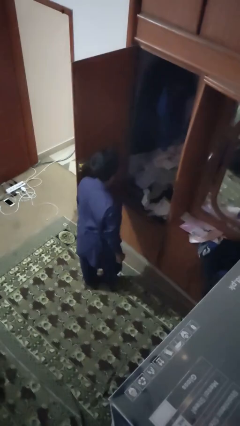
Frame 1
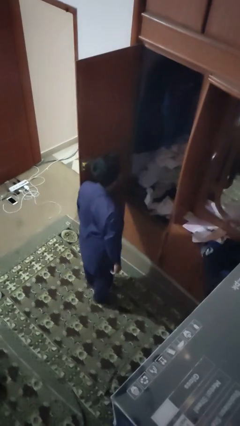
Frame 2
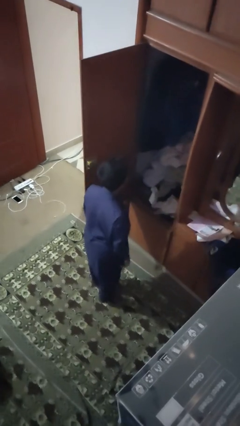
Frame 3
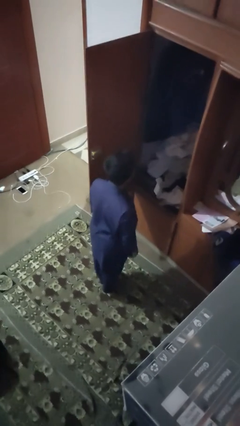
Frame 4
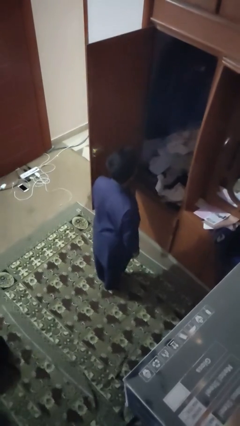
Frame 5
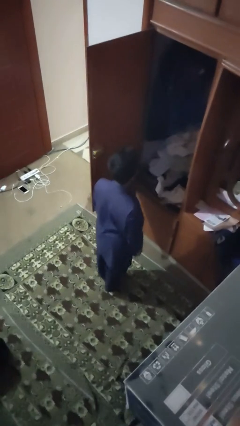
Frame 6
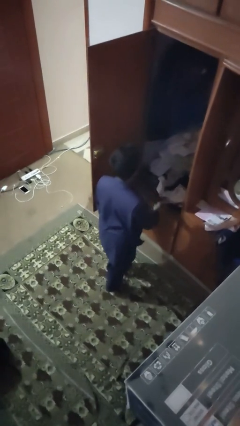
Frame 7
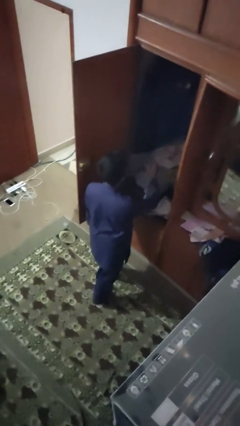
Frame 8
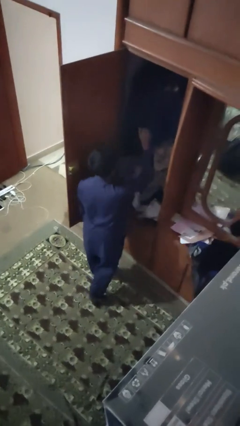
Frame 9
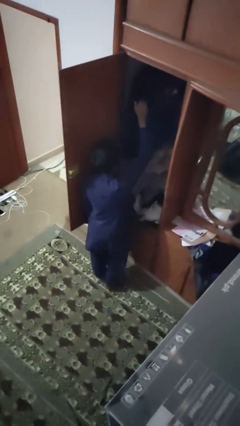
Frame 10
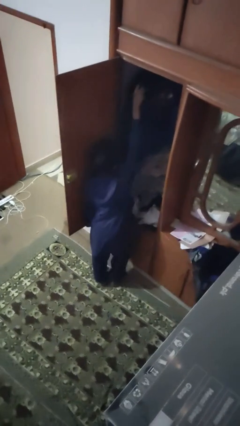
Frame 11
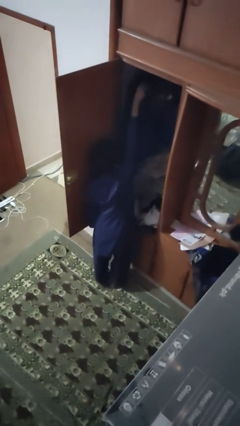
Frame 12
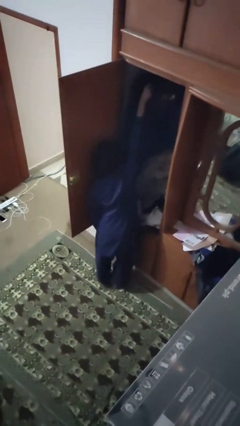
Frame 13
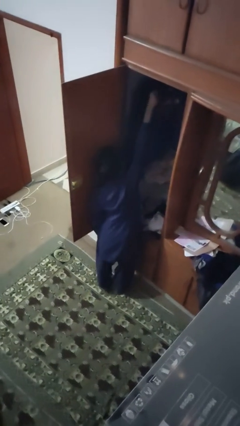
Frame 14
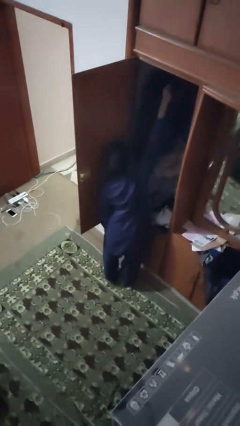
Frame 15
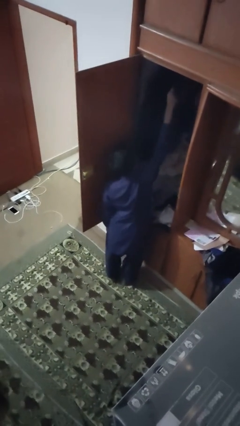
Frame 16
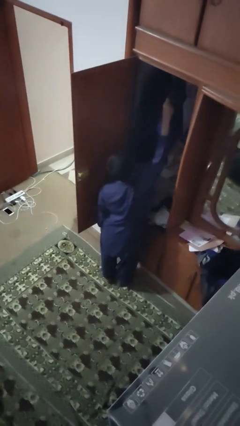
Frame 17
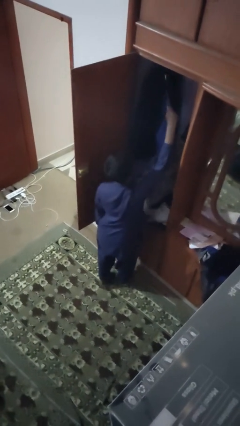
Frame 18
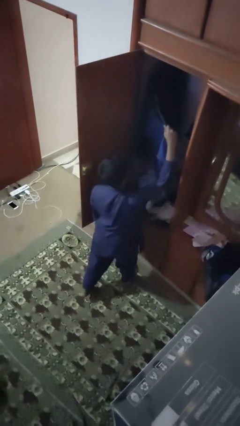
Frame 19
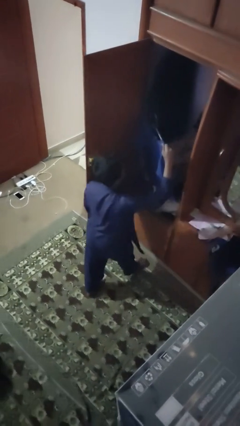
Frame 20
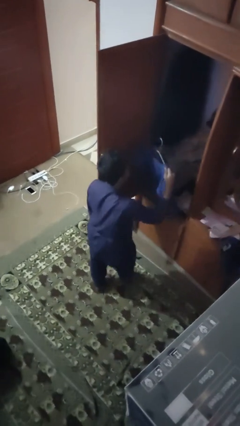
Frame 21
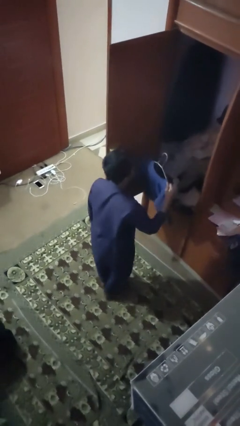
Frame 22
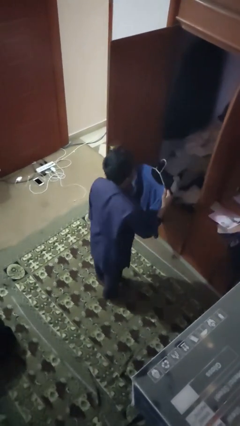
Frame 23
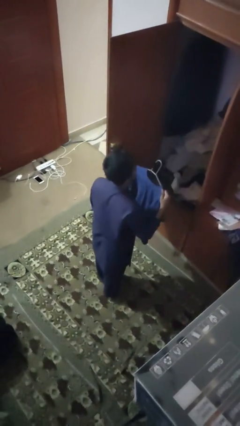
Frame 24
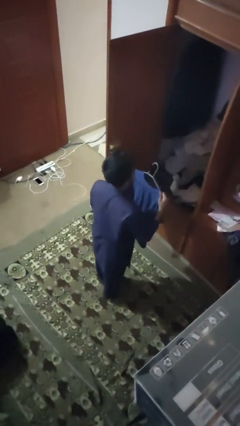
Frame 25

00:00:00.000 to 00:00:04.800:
person takes clothes from closet

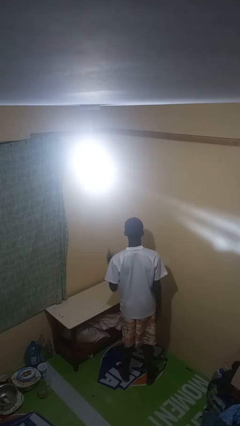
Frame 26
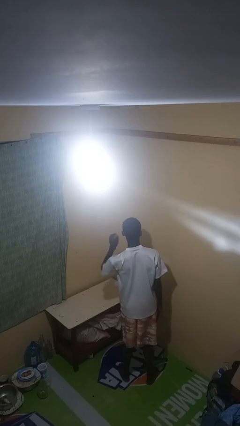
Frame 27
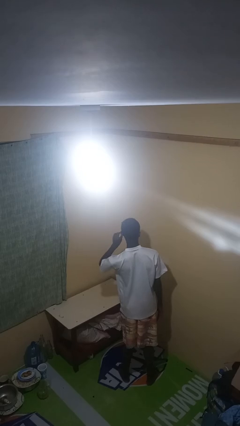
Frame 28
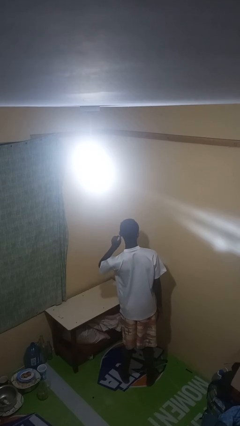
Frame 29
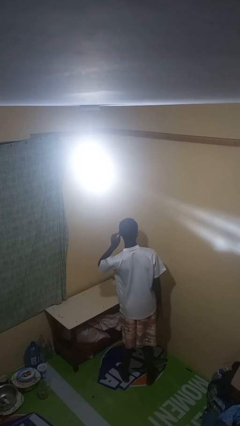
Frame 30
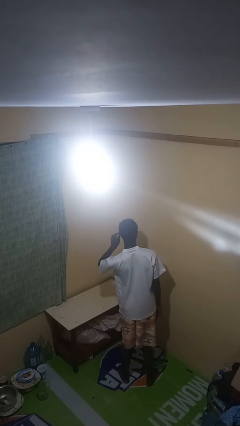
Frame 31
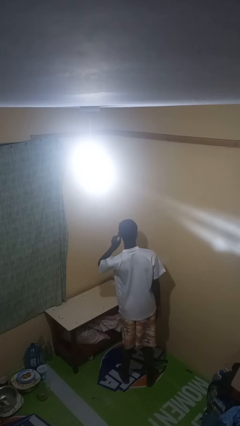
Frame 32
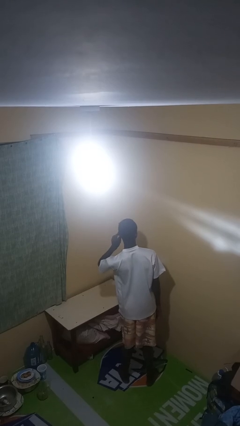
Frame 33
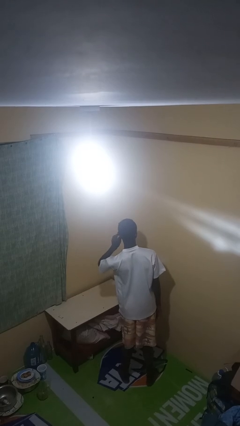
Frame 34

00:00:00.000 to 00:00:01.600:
person gestures listen closely

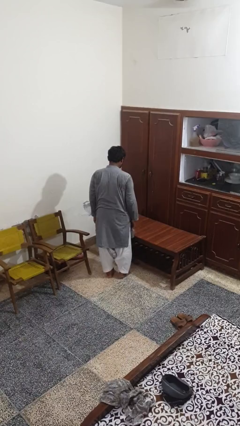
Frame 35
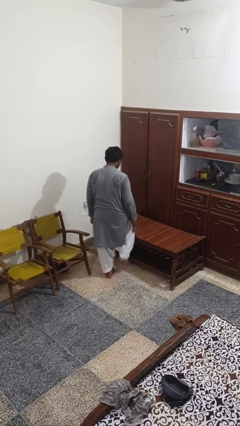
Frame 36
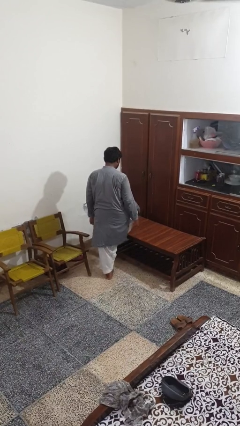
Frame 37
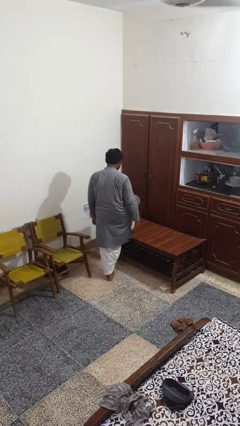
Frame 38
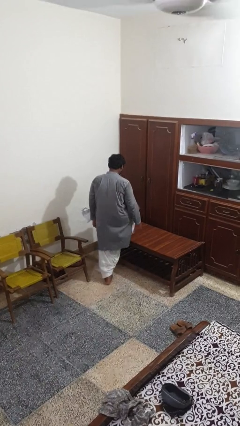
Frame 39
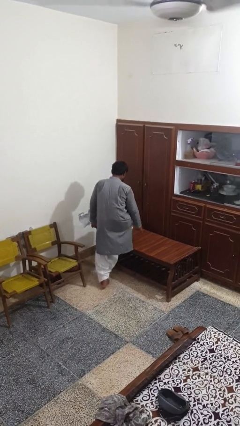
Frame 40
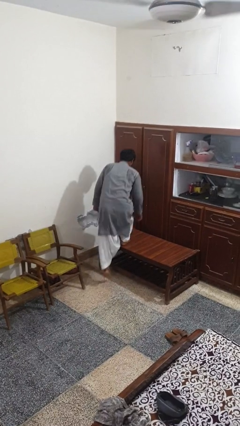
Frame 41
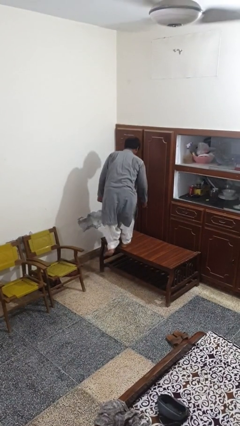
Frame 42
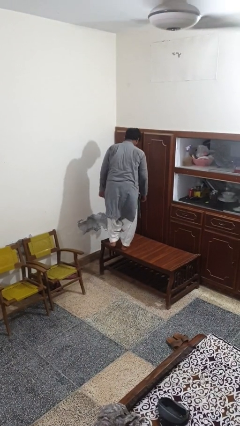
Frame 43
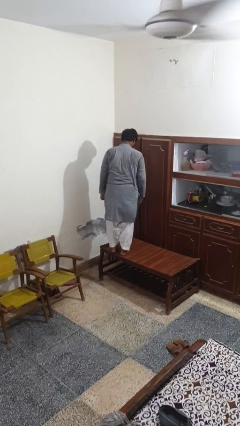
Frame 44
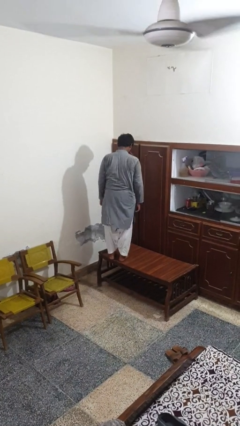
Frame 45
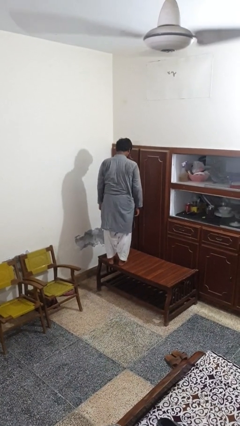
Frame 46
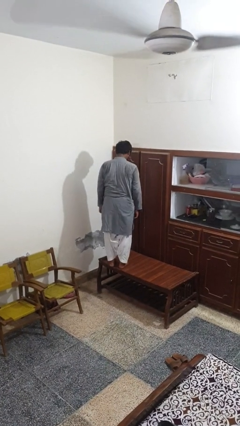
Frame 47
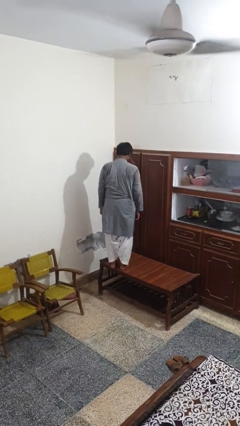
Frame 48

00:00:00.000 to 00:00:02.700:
person climbs on table

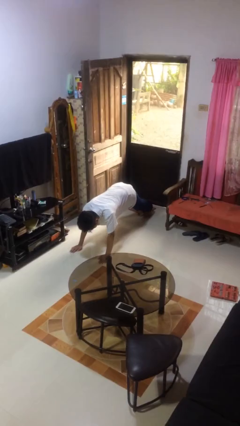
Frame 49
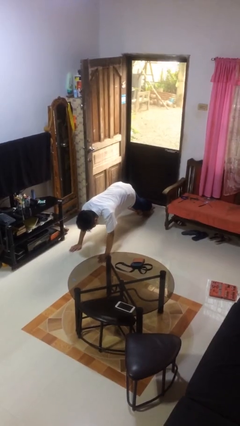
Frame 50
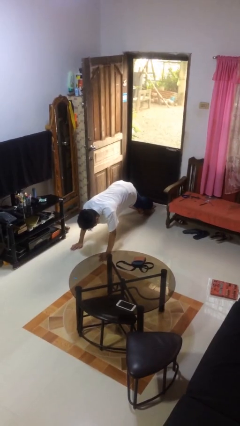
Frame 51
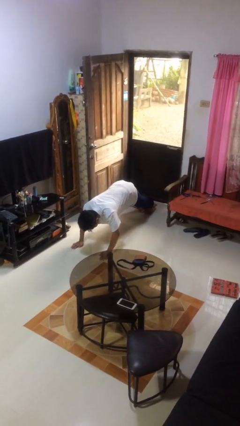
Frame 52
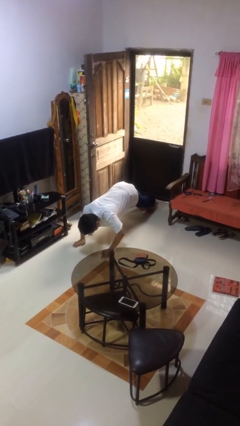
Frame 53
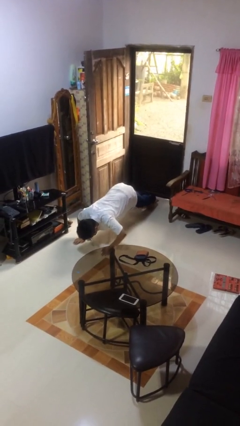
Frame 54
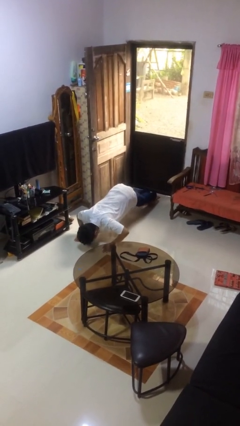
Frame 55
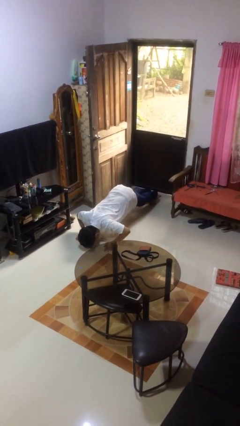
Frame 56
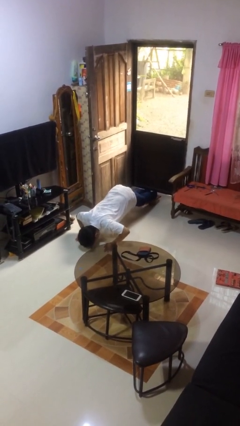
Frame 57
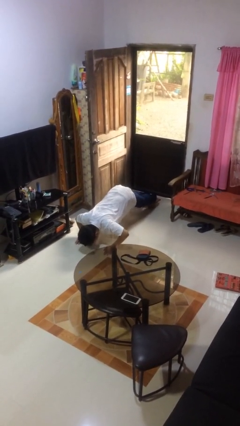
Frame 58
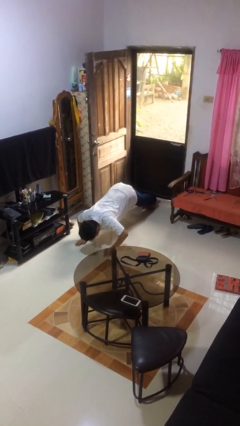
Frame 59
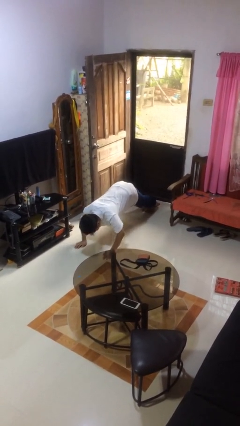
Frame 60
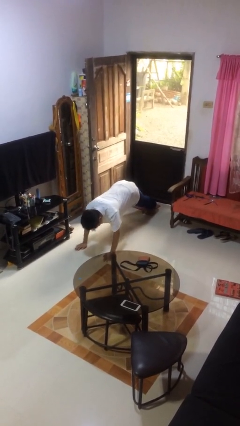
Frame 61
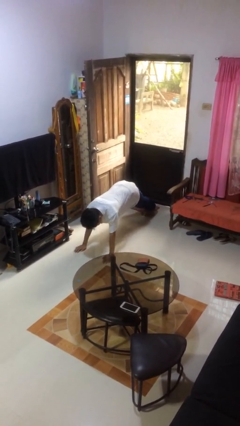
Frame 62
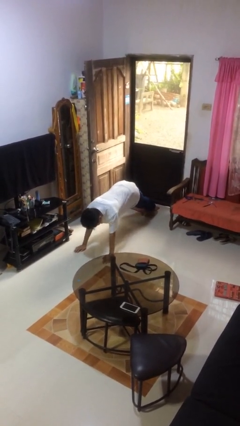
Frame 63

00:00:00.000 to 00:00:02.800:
person exercises with pushup

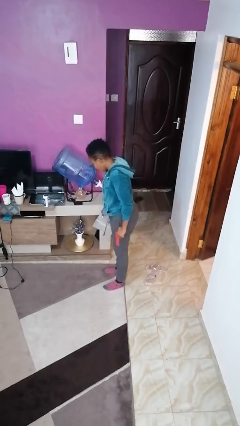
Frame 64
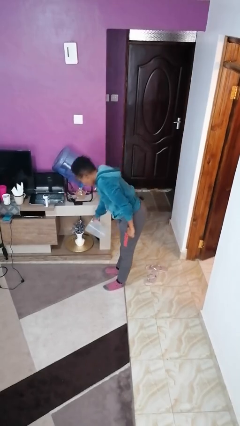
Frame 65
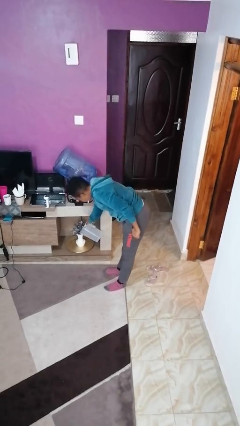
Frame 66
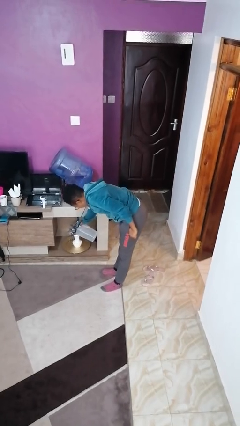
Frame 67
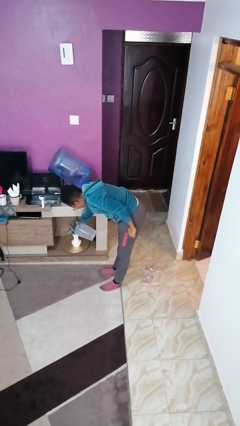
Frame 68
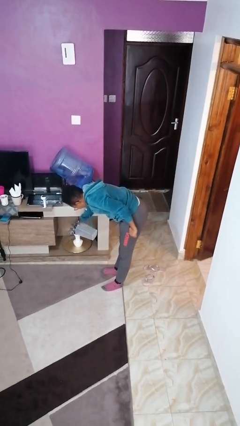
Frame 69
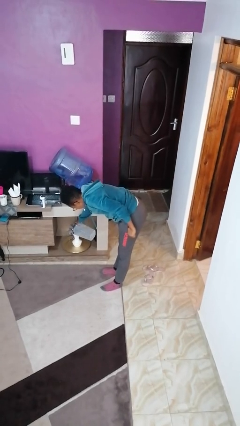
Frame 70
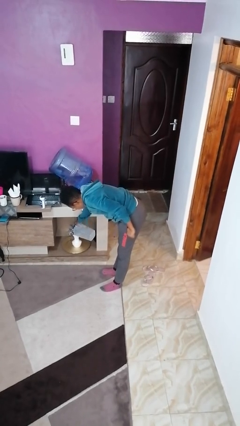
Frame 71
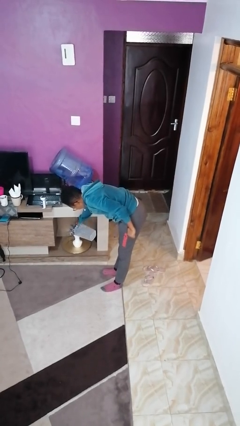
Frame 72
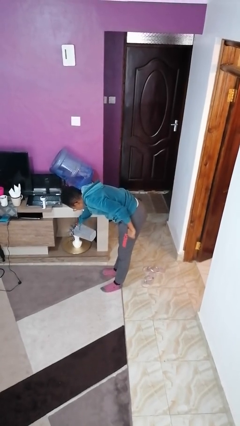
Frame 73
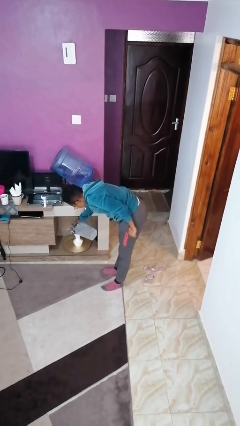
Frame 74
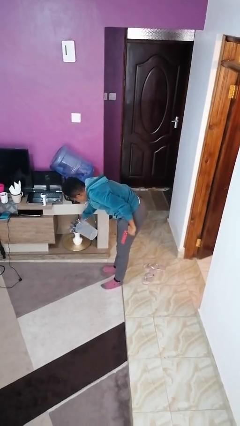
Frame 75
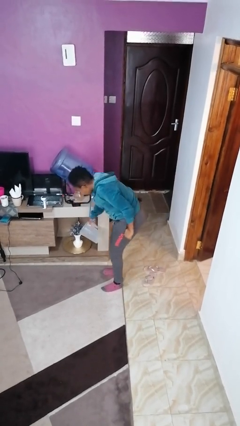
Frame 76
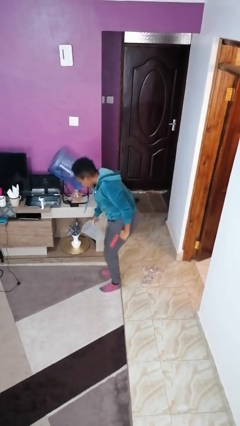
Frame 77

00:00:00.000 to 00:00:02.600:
person waters houseplant

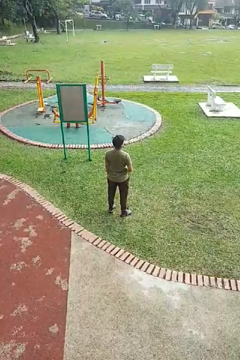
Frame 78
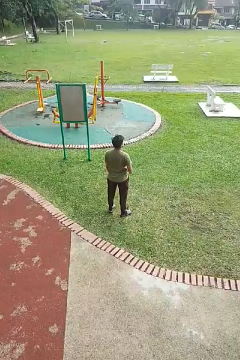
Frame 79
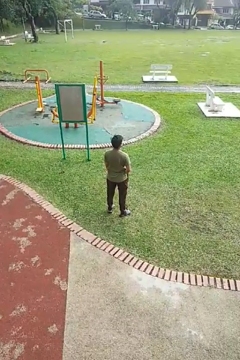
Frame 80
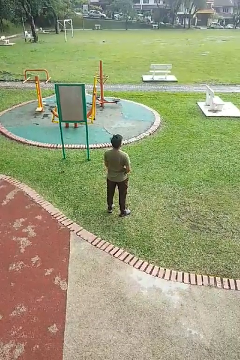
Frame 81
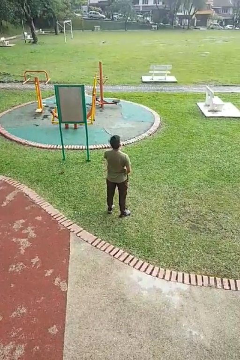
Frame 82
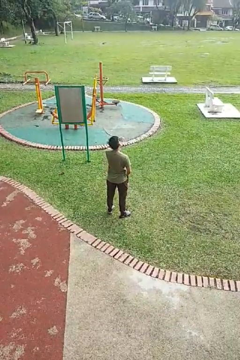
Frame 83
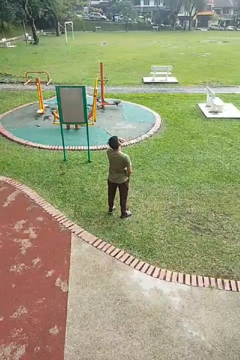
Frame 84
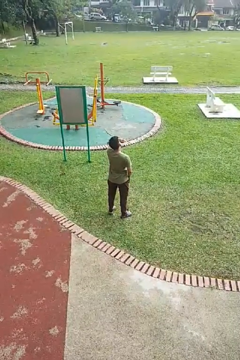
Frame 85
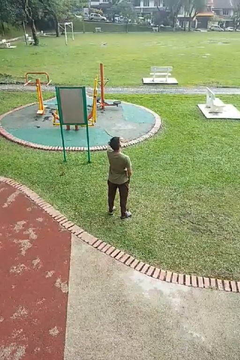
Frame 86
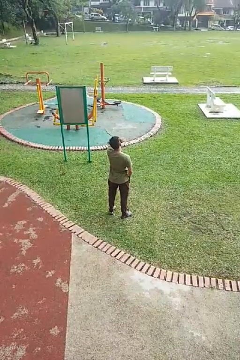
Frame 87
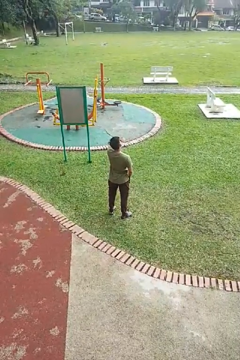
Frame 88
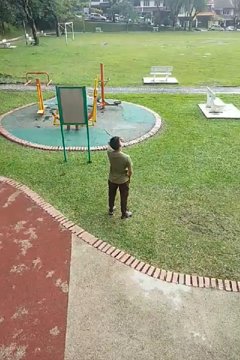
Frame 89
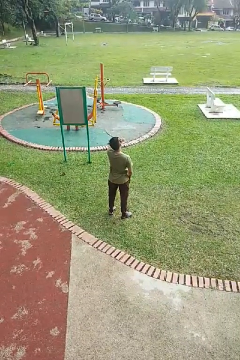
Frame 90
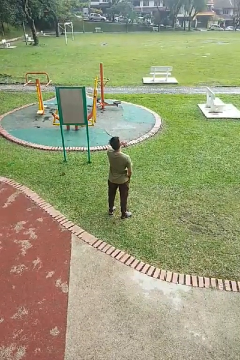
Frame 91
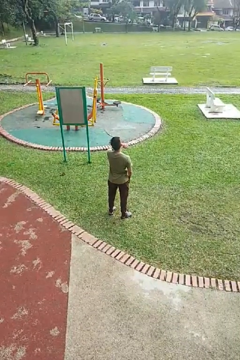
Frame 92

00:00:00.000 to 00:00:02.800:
person rubs eyes

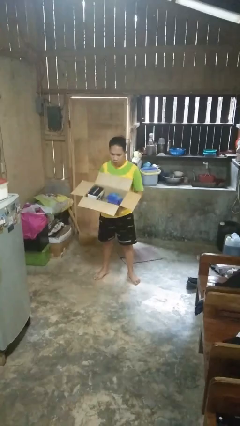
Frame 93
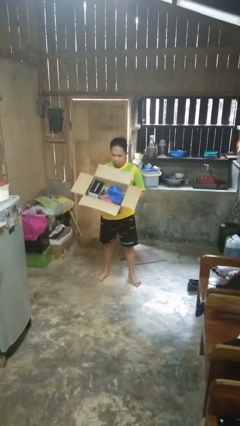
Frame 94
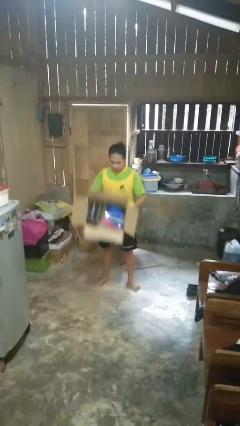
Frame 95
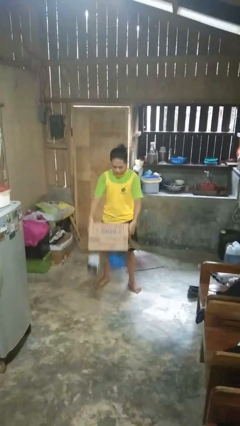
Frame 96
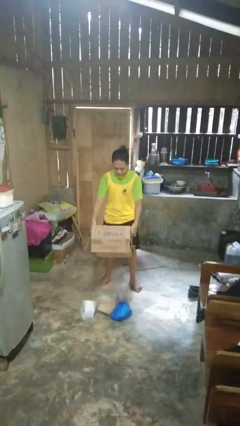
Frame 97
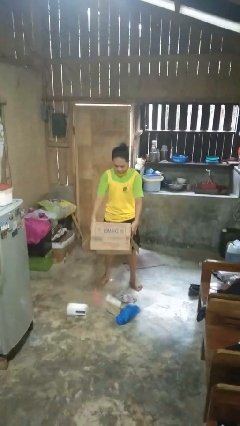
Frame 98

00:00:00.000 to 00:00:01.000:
person unloads box onto floor
